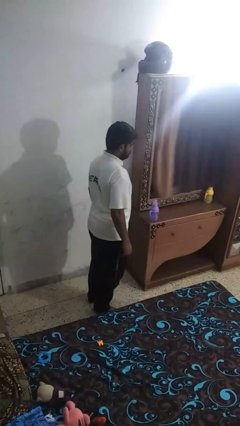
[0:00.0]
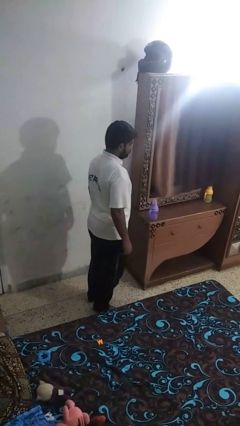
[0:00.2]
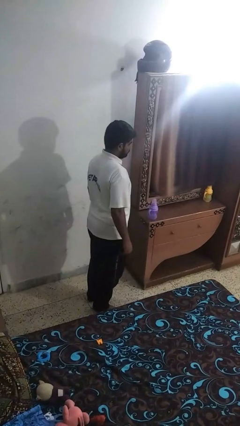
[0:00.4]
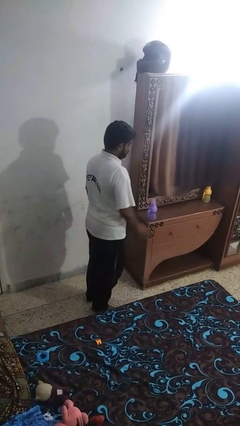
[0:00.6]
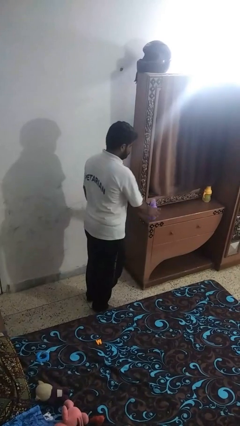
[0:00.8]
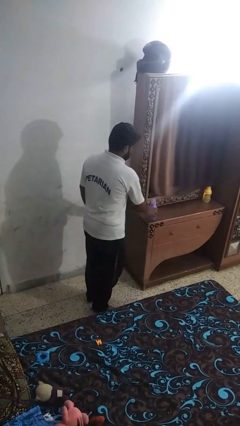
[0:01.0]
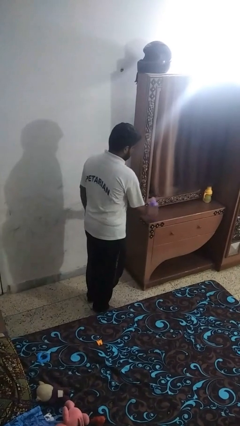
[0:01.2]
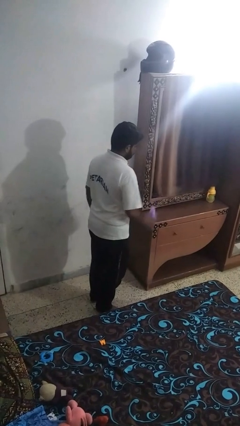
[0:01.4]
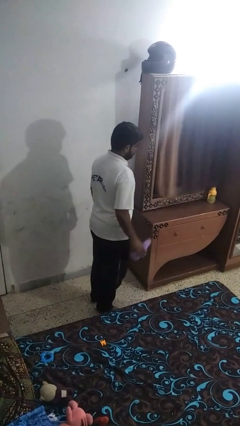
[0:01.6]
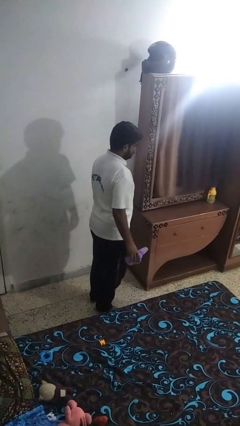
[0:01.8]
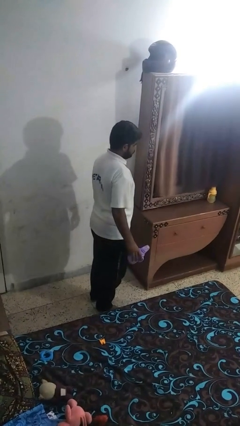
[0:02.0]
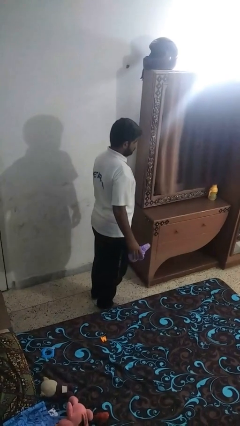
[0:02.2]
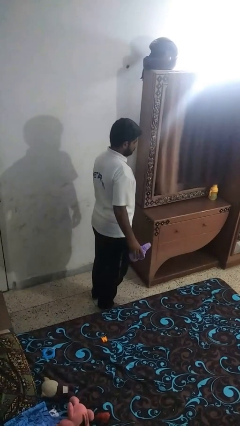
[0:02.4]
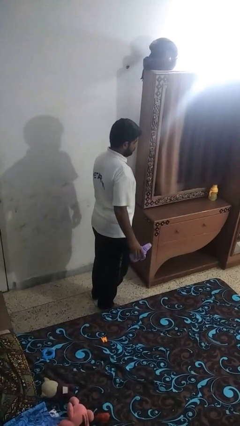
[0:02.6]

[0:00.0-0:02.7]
person picks up object from countertop

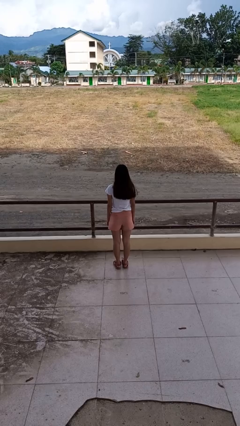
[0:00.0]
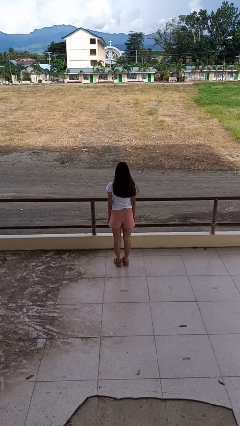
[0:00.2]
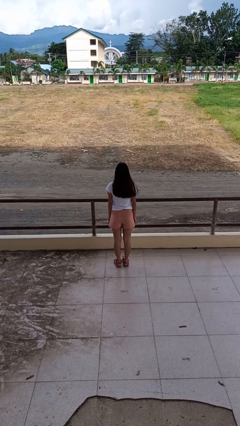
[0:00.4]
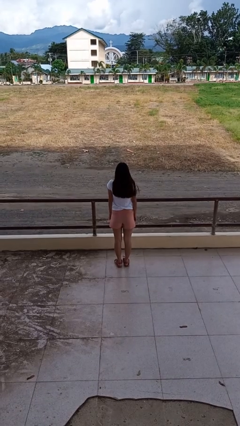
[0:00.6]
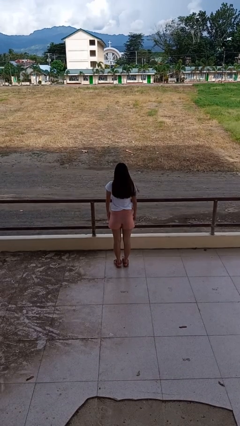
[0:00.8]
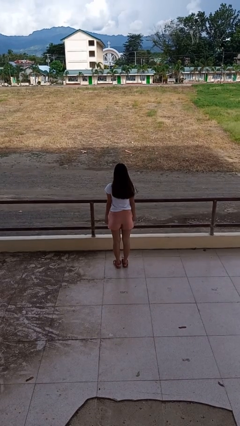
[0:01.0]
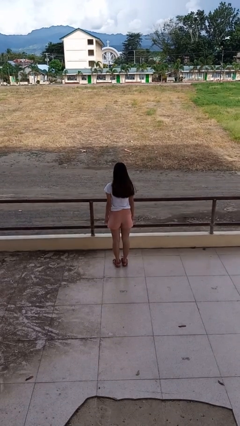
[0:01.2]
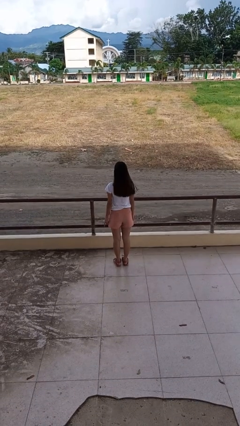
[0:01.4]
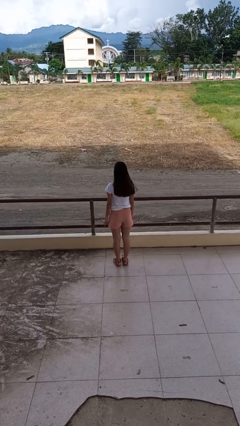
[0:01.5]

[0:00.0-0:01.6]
person shrugs

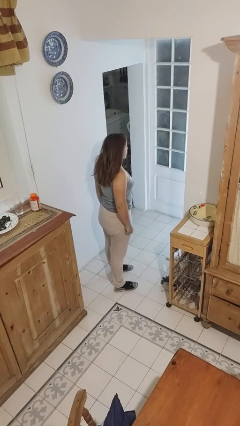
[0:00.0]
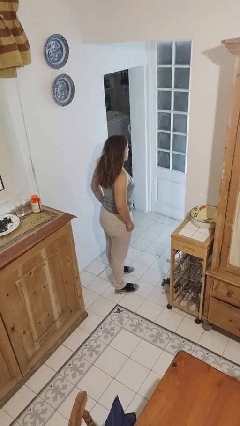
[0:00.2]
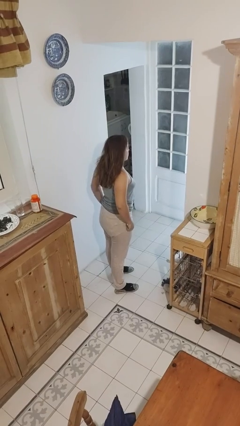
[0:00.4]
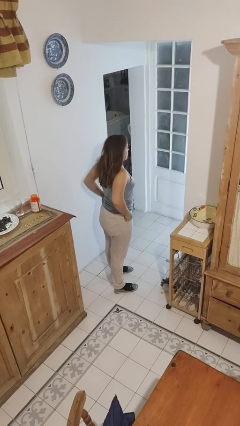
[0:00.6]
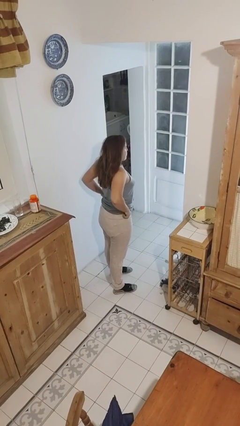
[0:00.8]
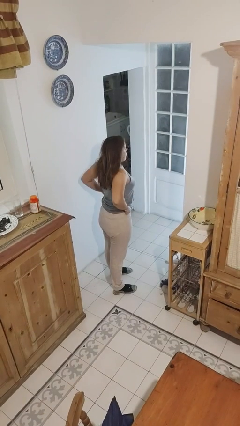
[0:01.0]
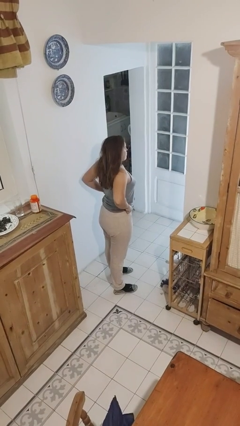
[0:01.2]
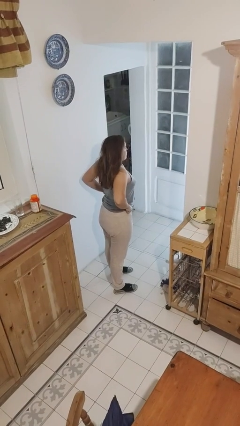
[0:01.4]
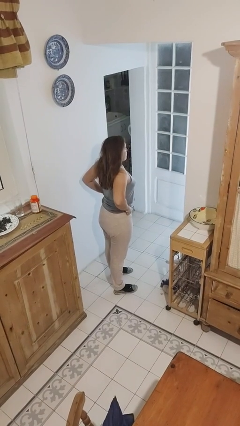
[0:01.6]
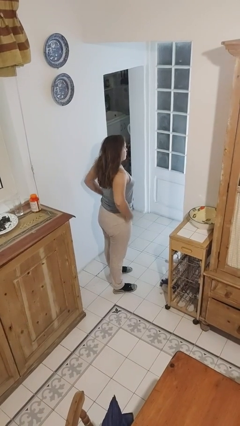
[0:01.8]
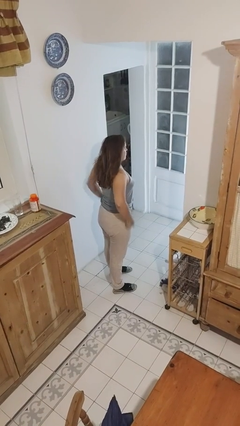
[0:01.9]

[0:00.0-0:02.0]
person hikes up pants

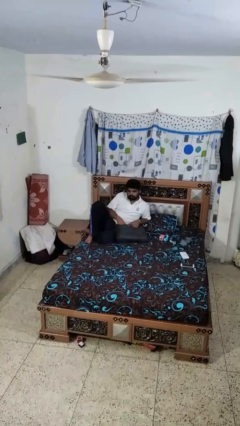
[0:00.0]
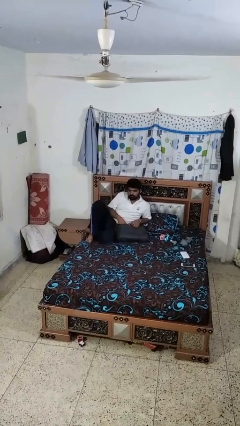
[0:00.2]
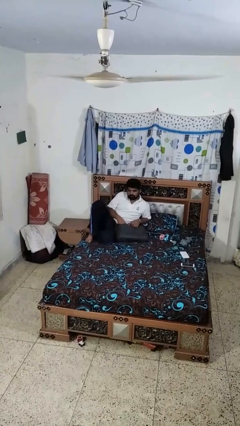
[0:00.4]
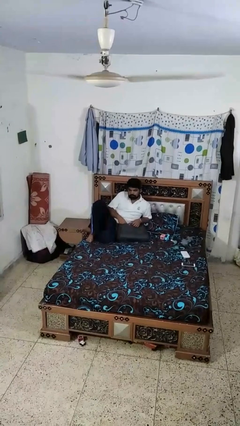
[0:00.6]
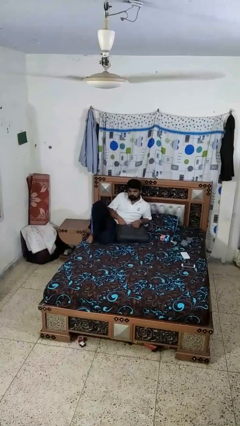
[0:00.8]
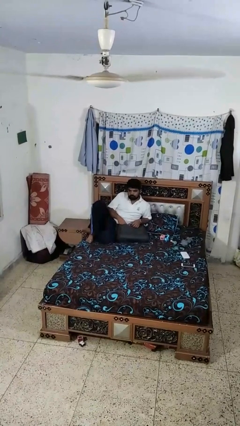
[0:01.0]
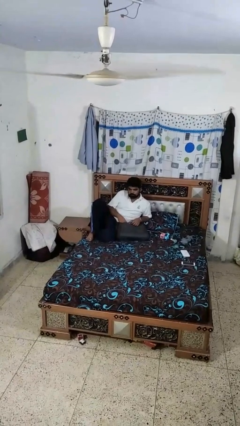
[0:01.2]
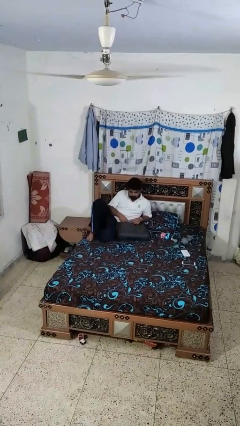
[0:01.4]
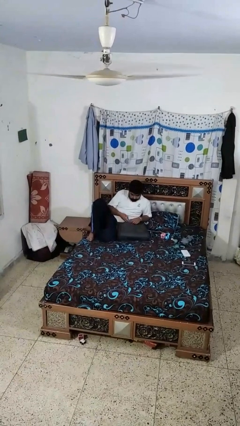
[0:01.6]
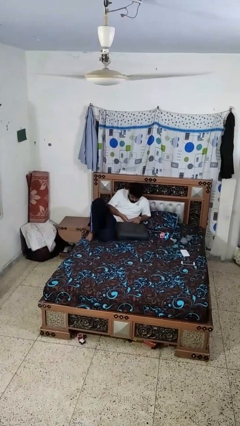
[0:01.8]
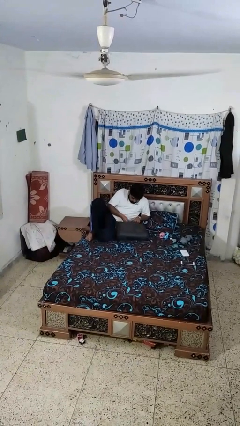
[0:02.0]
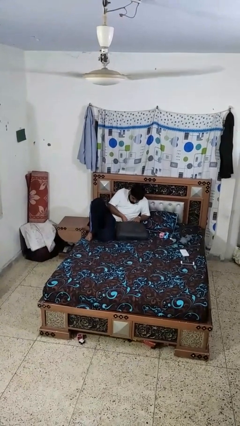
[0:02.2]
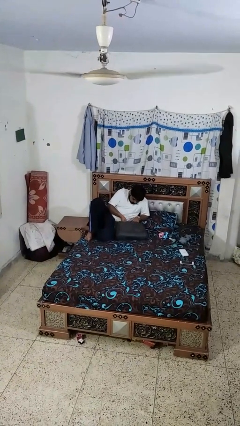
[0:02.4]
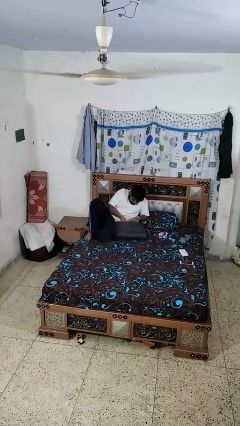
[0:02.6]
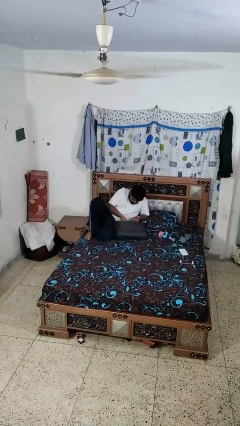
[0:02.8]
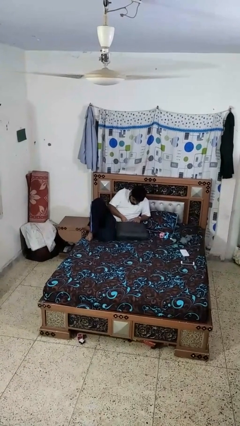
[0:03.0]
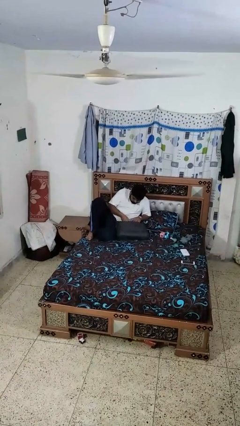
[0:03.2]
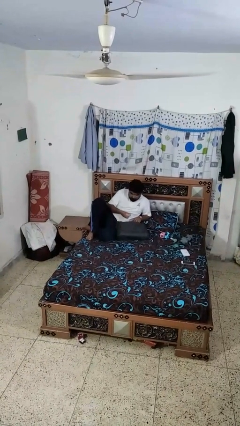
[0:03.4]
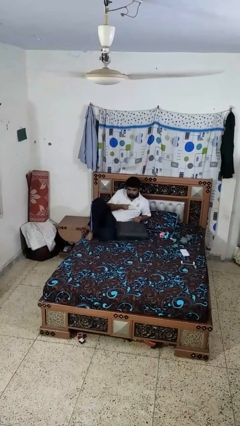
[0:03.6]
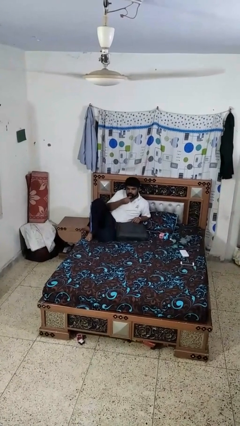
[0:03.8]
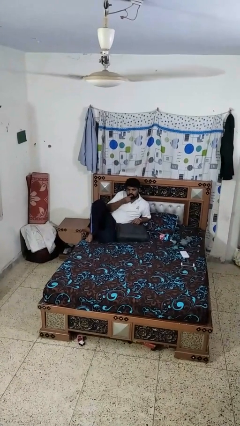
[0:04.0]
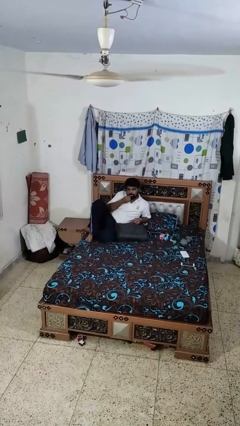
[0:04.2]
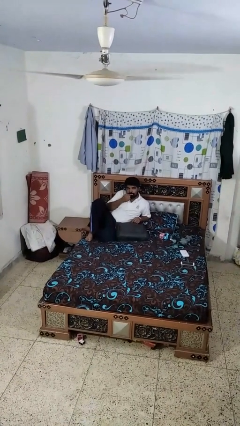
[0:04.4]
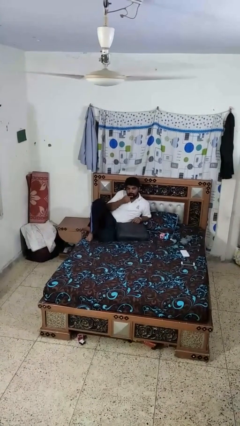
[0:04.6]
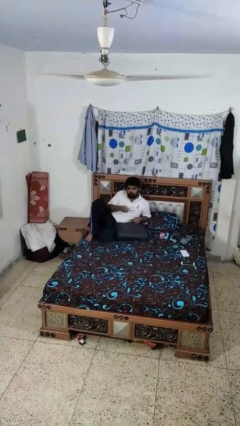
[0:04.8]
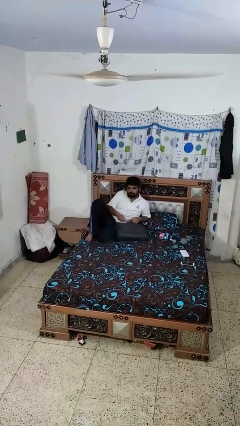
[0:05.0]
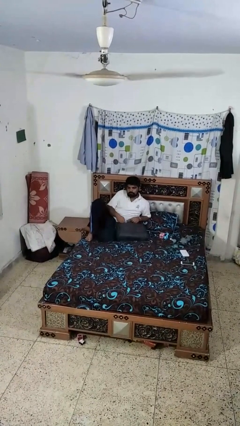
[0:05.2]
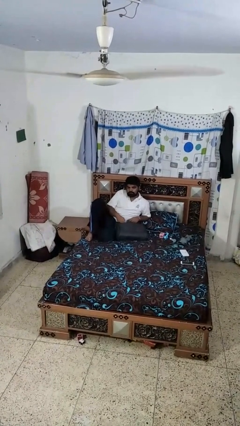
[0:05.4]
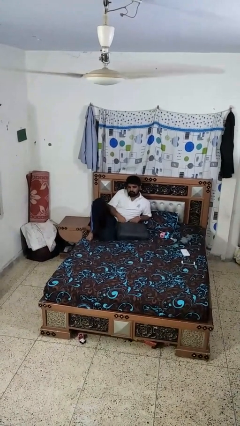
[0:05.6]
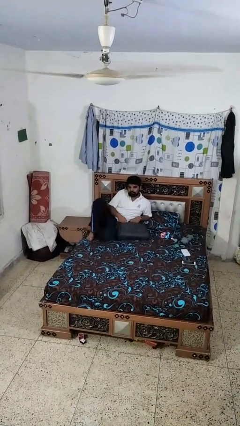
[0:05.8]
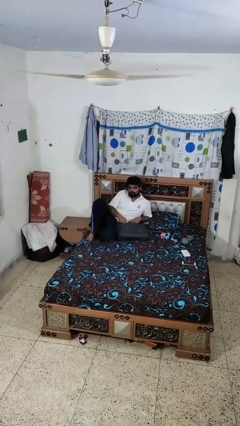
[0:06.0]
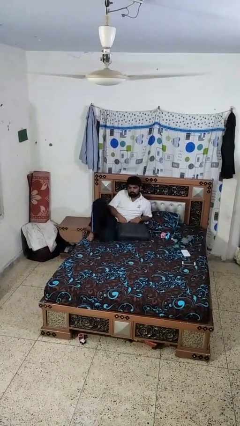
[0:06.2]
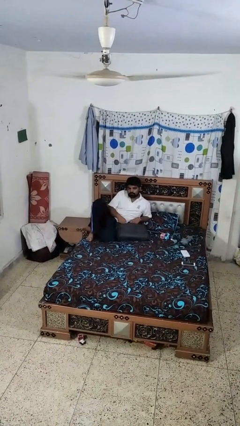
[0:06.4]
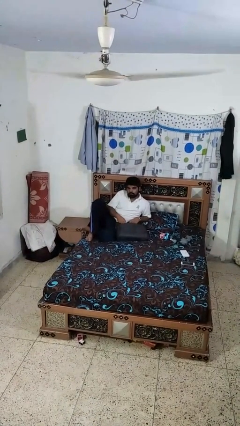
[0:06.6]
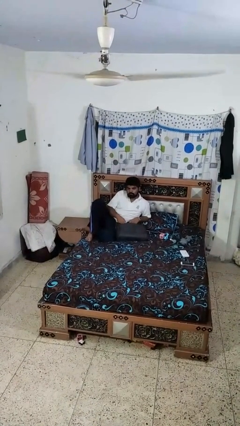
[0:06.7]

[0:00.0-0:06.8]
person eats snack from bag

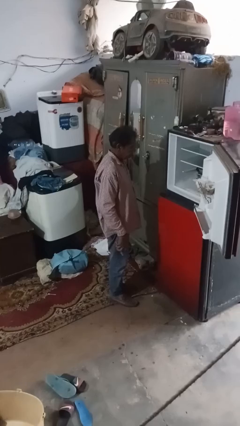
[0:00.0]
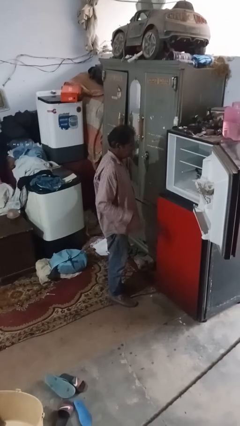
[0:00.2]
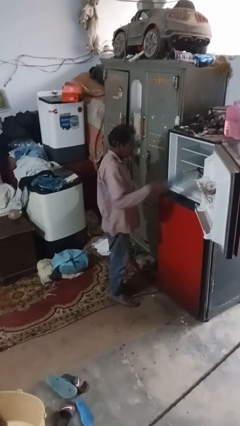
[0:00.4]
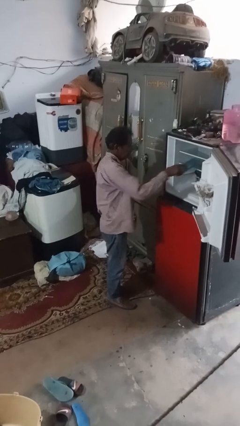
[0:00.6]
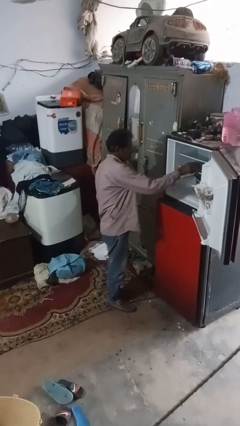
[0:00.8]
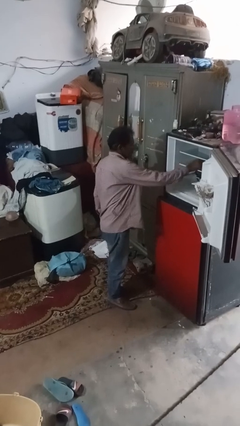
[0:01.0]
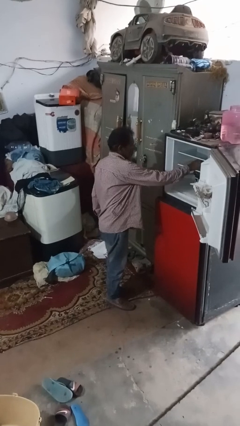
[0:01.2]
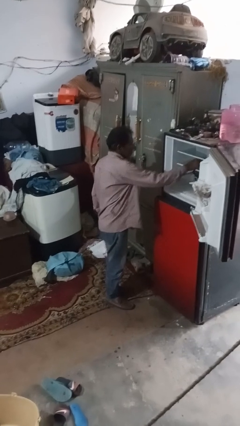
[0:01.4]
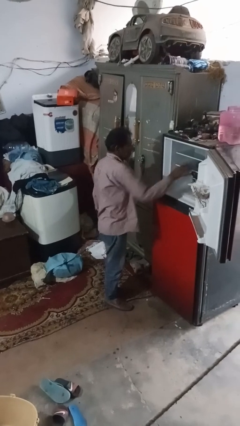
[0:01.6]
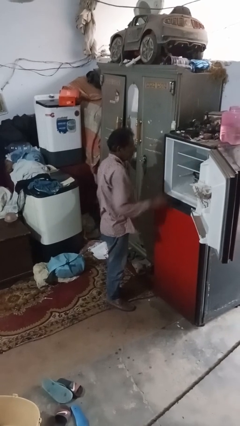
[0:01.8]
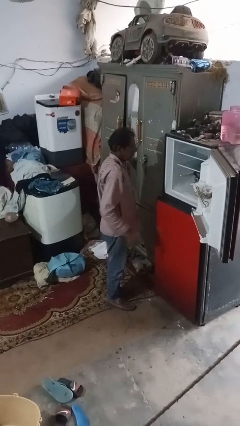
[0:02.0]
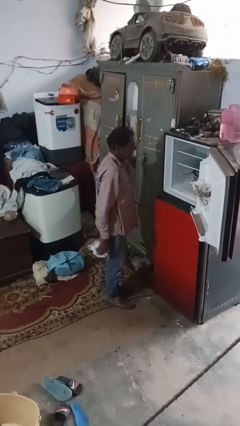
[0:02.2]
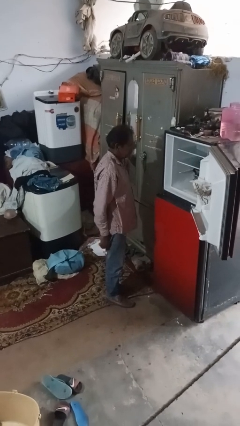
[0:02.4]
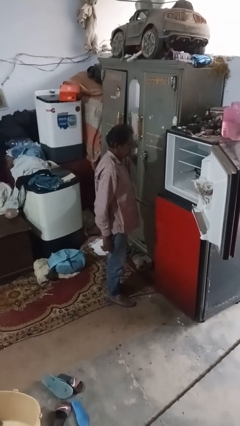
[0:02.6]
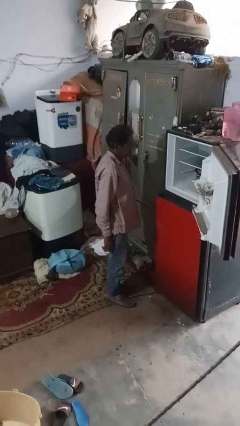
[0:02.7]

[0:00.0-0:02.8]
person puts object into refrigerator

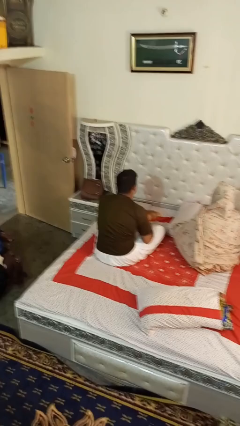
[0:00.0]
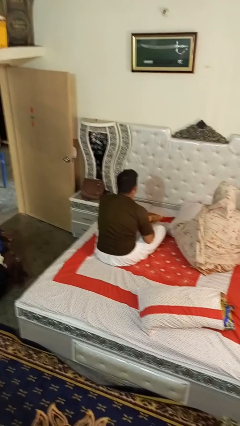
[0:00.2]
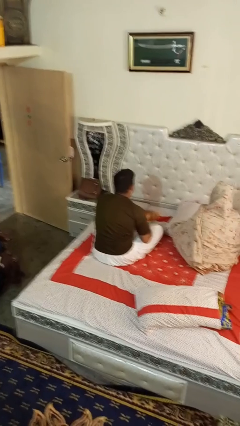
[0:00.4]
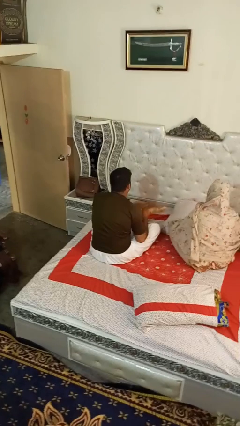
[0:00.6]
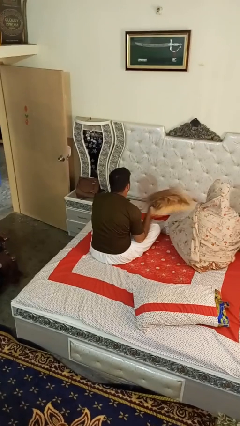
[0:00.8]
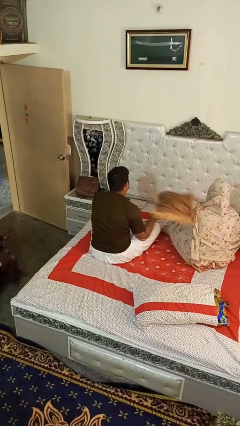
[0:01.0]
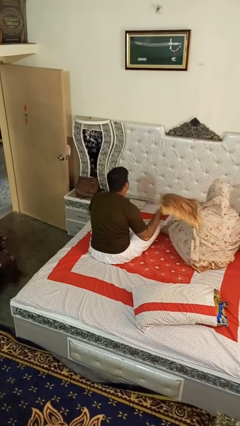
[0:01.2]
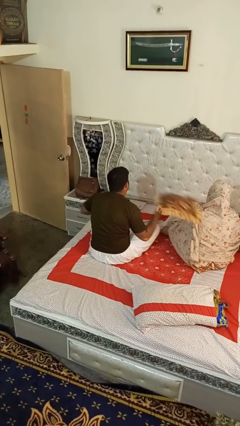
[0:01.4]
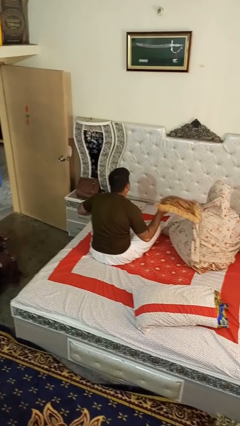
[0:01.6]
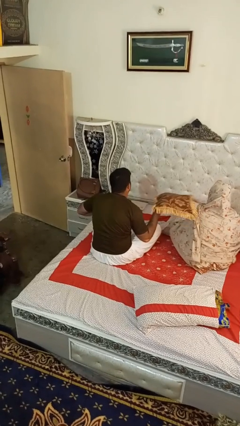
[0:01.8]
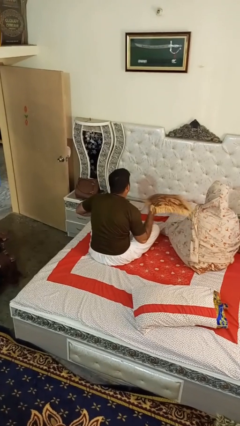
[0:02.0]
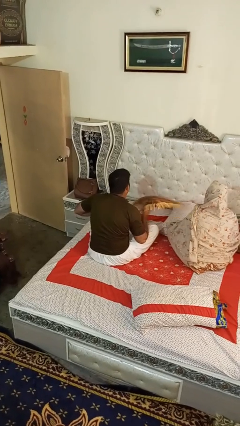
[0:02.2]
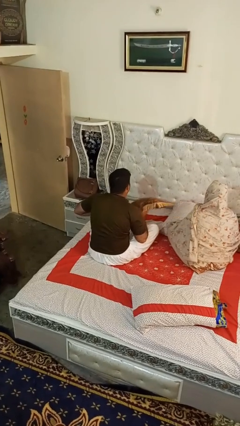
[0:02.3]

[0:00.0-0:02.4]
person hits person with pillow
